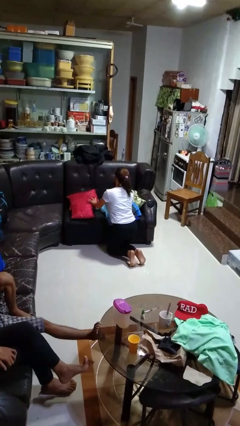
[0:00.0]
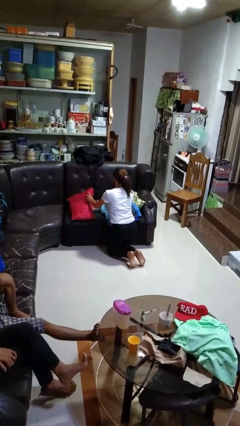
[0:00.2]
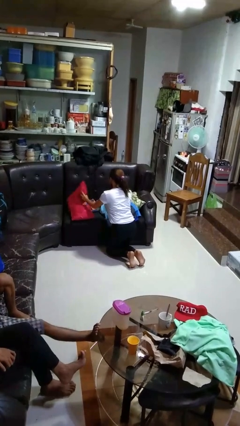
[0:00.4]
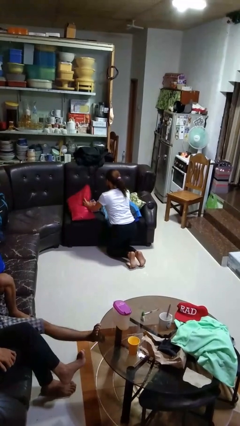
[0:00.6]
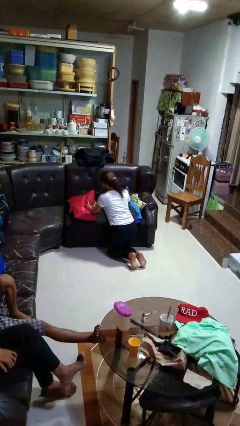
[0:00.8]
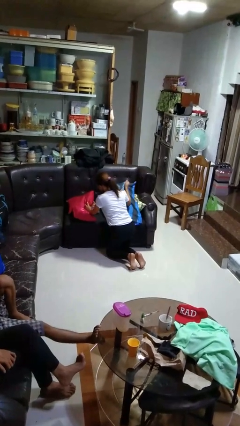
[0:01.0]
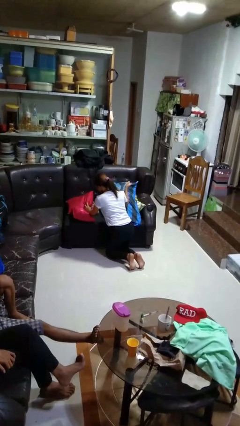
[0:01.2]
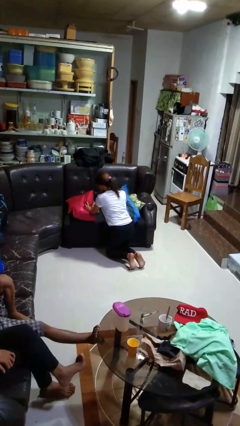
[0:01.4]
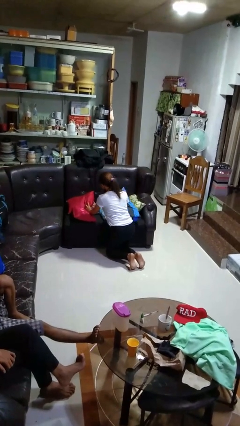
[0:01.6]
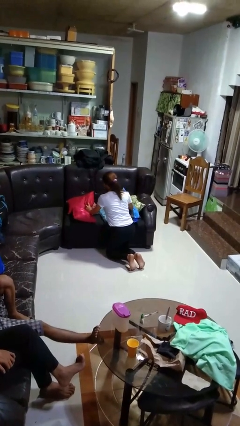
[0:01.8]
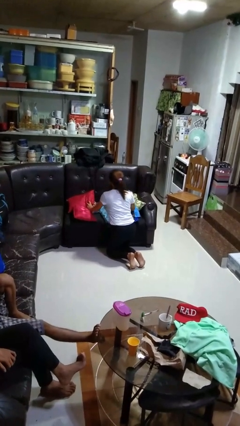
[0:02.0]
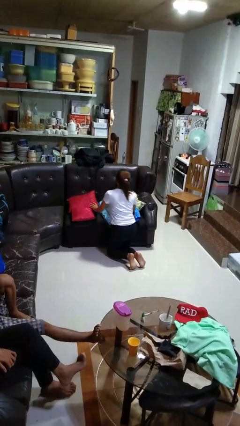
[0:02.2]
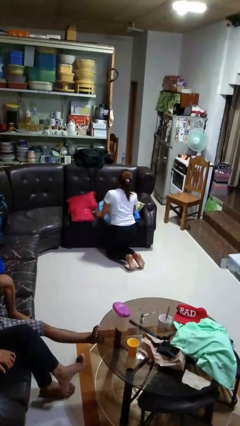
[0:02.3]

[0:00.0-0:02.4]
person searches in couch

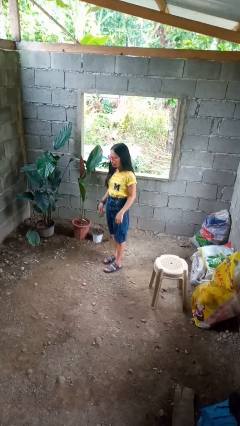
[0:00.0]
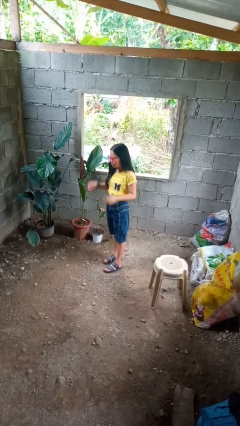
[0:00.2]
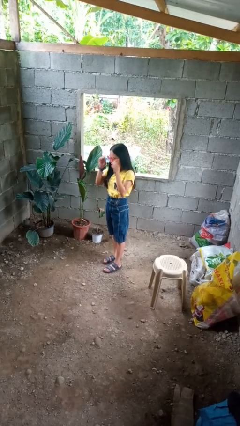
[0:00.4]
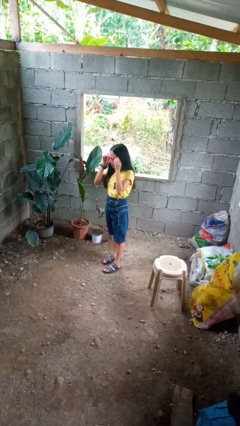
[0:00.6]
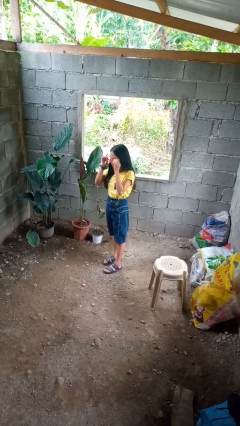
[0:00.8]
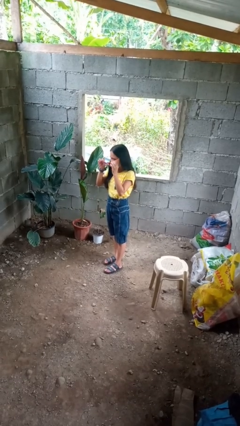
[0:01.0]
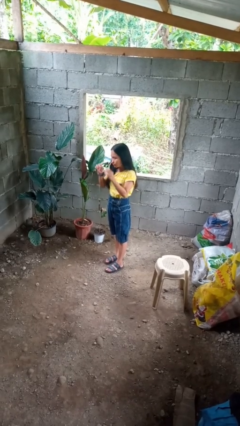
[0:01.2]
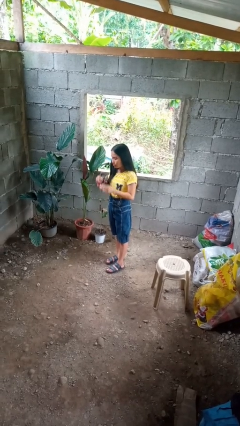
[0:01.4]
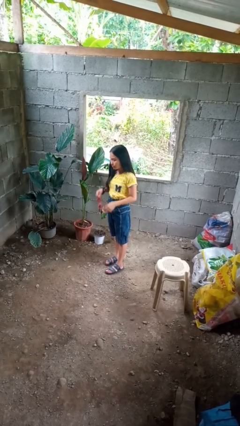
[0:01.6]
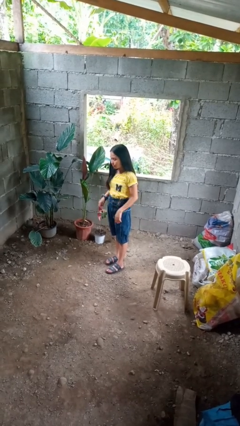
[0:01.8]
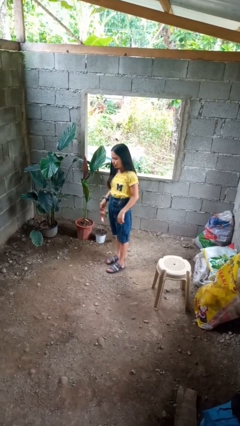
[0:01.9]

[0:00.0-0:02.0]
person takes off sunglasses

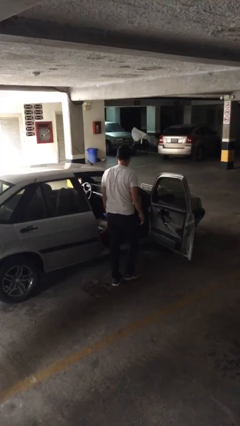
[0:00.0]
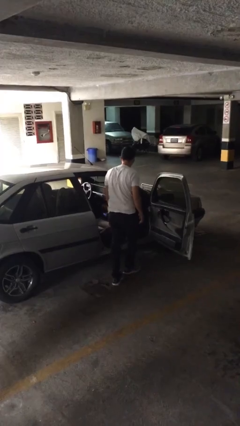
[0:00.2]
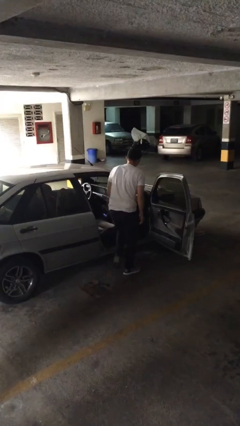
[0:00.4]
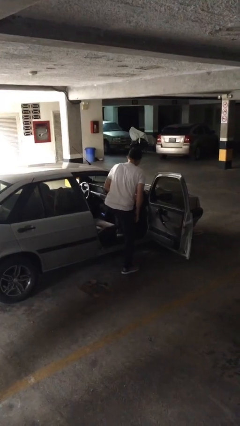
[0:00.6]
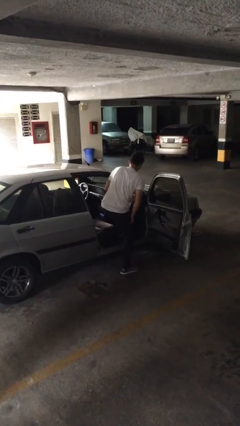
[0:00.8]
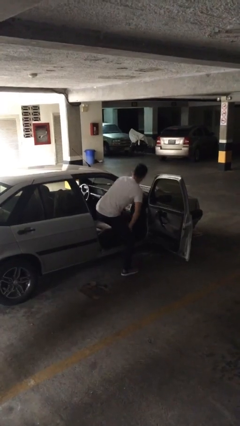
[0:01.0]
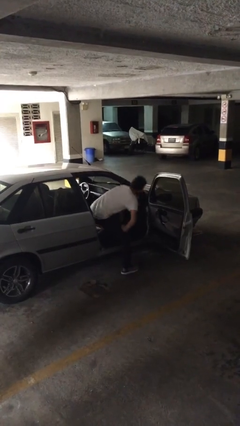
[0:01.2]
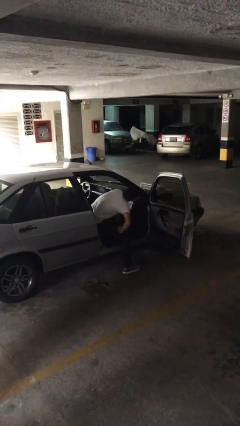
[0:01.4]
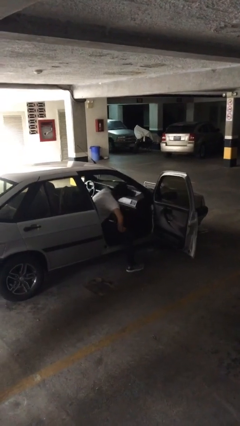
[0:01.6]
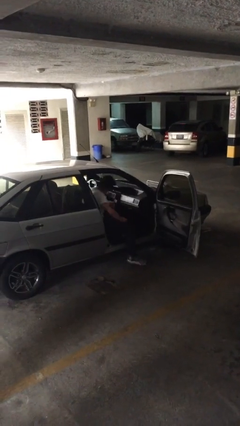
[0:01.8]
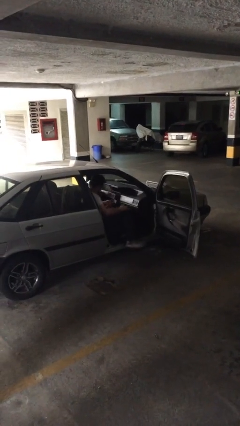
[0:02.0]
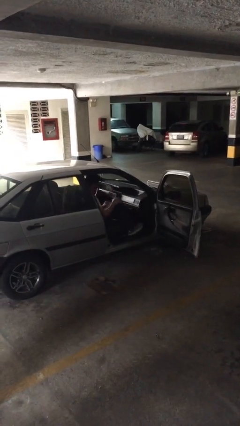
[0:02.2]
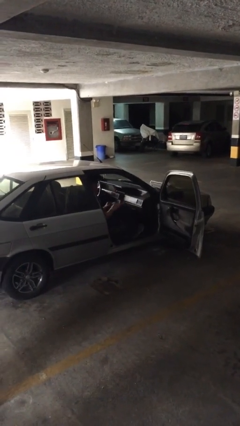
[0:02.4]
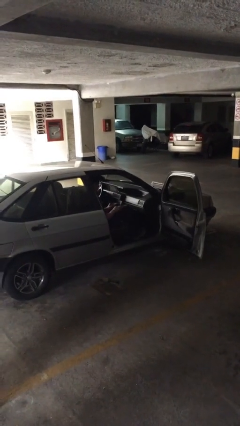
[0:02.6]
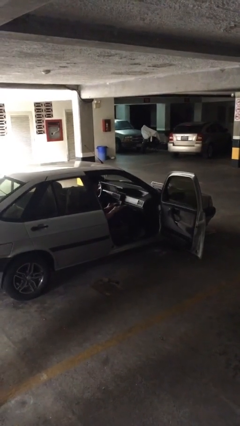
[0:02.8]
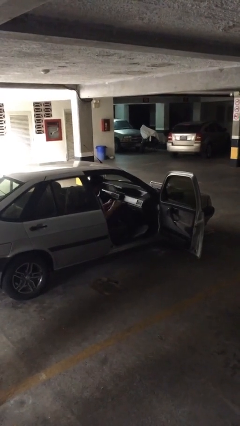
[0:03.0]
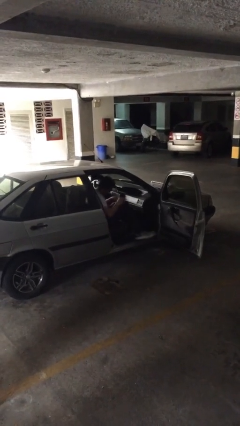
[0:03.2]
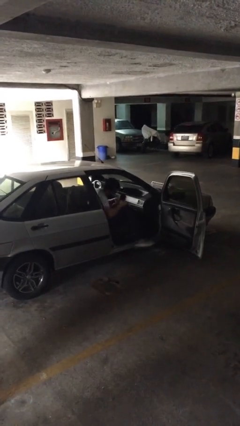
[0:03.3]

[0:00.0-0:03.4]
person enters car

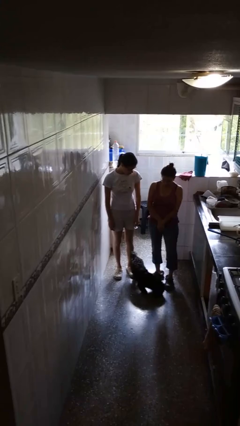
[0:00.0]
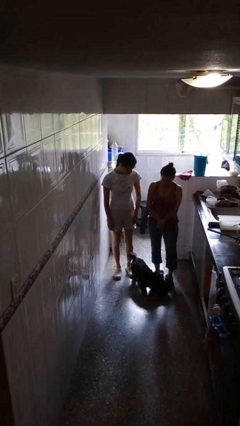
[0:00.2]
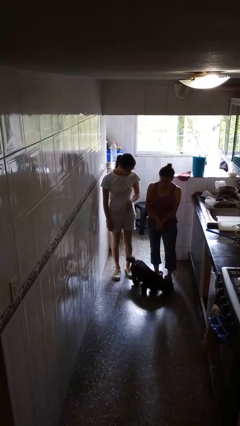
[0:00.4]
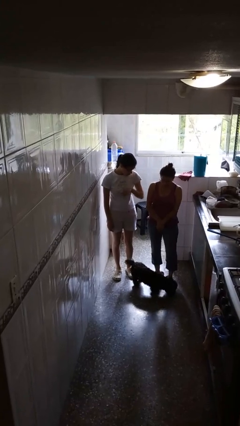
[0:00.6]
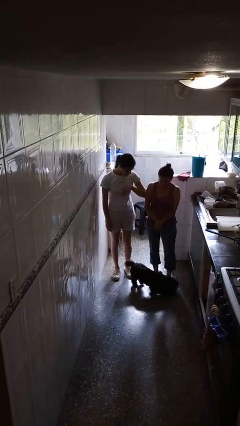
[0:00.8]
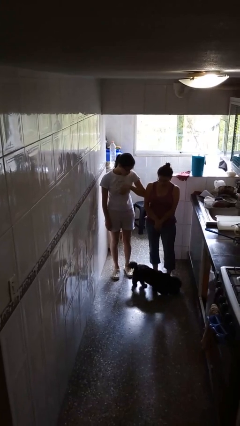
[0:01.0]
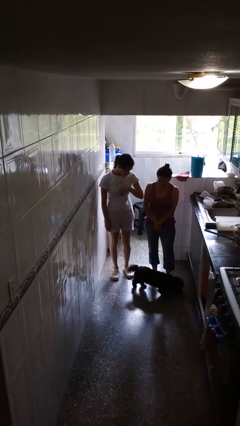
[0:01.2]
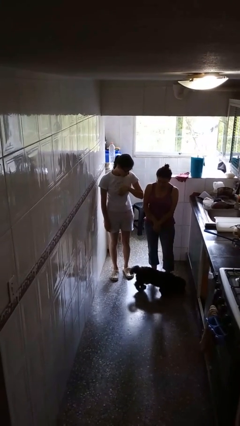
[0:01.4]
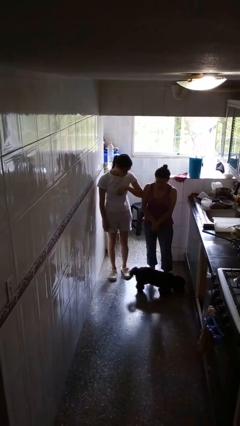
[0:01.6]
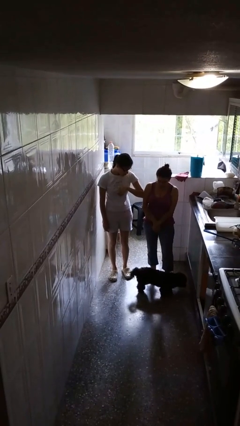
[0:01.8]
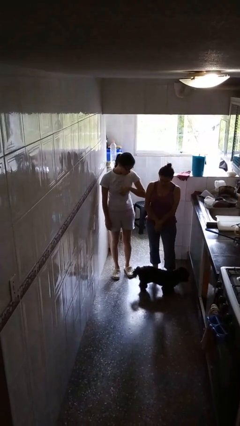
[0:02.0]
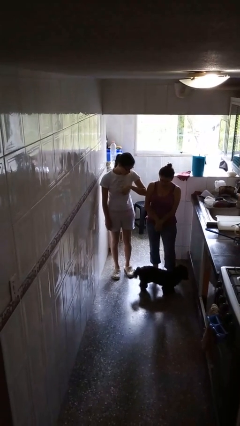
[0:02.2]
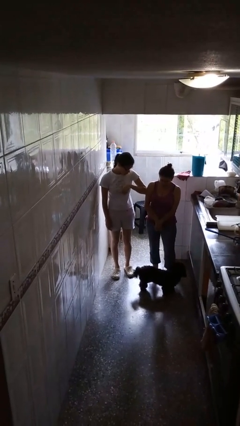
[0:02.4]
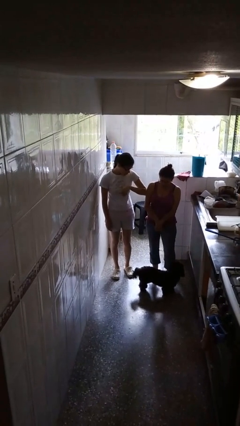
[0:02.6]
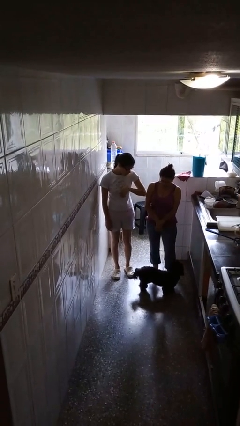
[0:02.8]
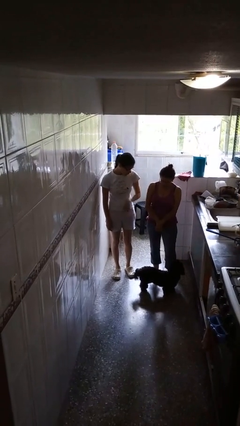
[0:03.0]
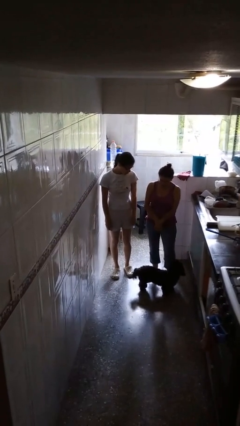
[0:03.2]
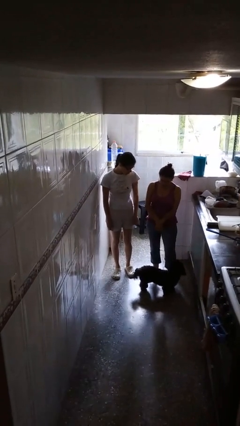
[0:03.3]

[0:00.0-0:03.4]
person nudges person with elbow

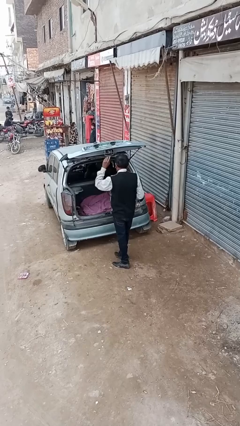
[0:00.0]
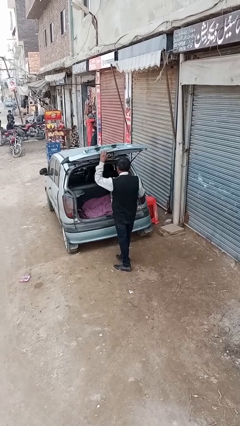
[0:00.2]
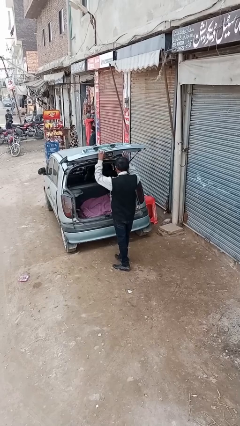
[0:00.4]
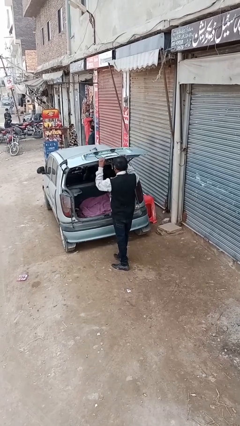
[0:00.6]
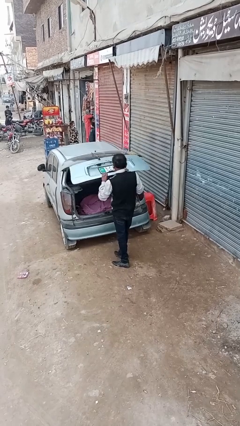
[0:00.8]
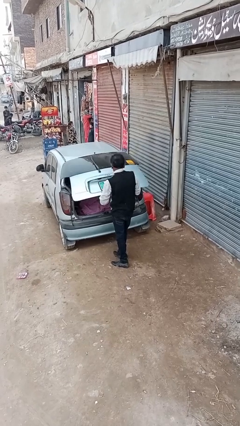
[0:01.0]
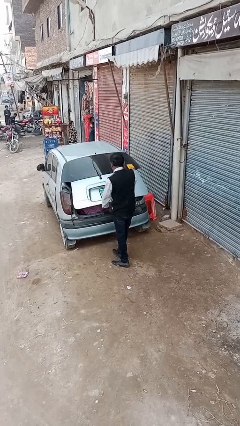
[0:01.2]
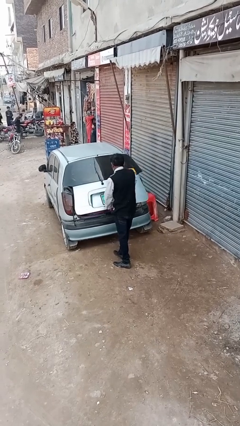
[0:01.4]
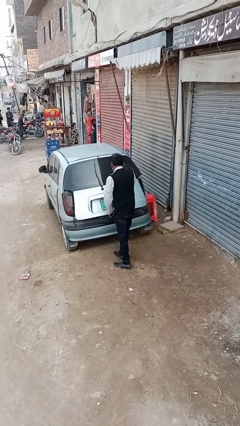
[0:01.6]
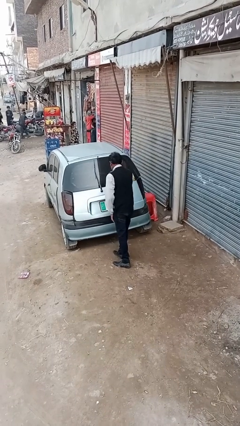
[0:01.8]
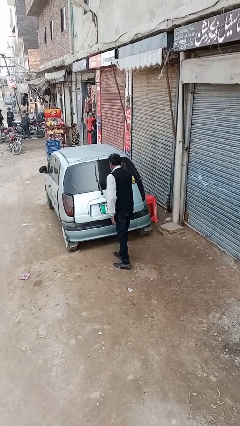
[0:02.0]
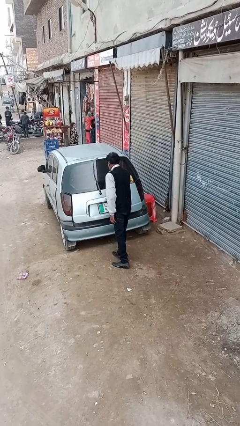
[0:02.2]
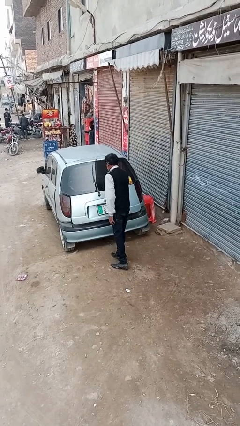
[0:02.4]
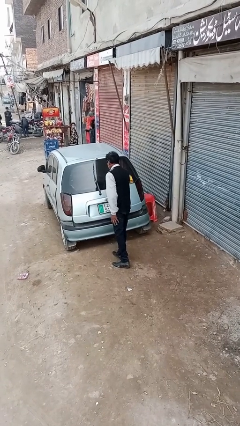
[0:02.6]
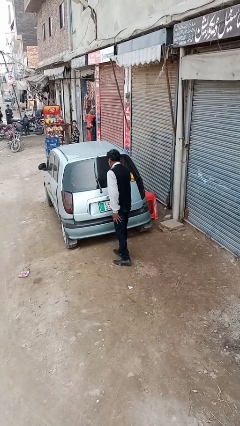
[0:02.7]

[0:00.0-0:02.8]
person closes car trunk

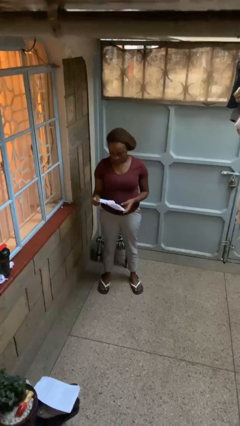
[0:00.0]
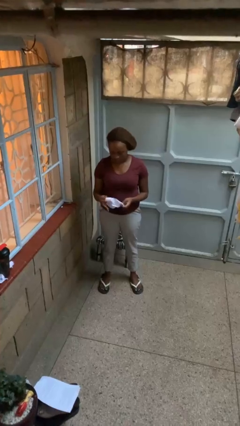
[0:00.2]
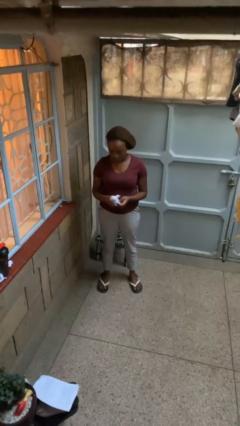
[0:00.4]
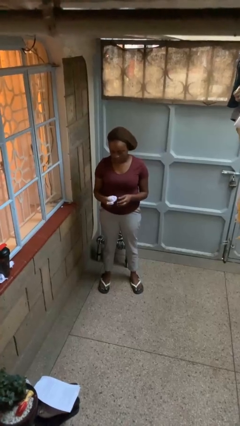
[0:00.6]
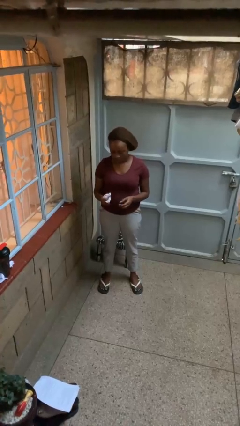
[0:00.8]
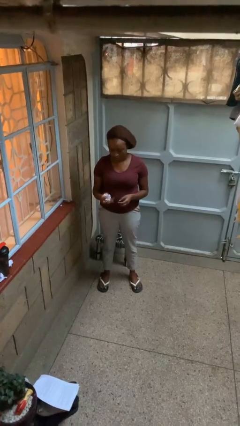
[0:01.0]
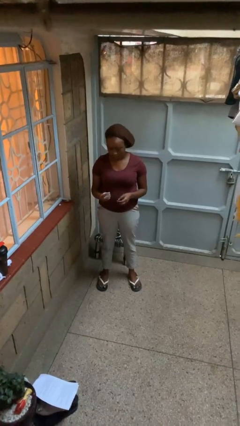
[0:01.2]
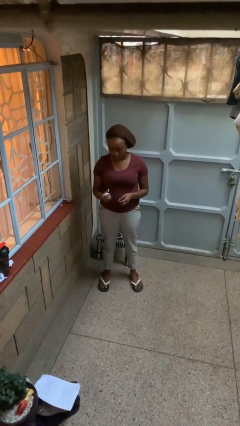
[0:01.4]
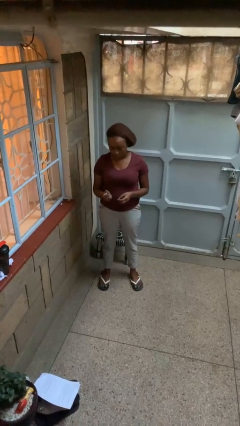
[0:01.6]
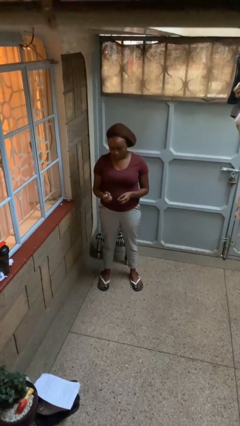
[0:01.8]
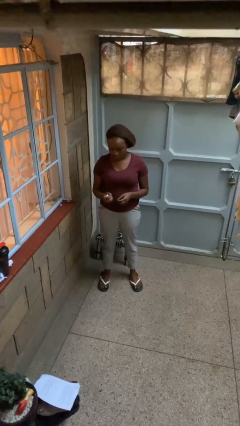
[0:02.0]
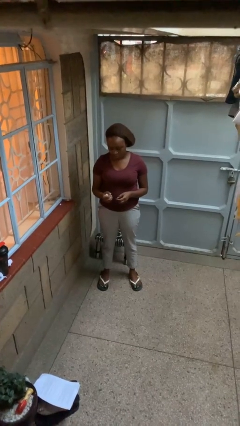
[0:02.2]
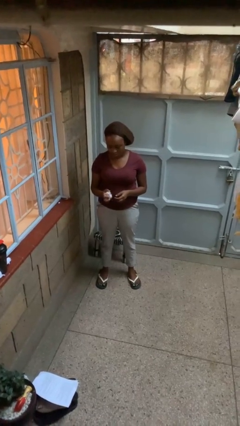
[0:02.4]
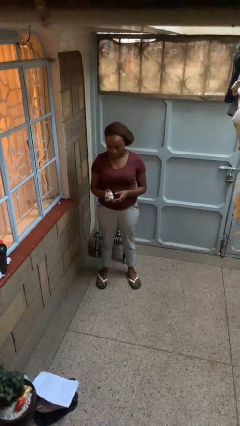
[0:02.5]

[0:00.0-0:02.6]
person crumples paper

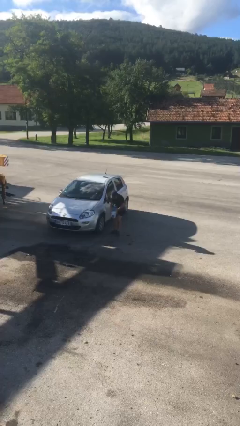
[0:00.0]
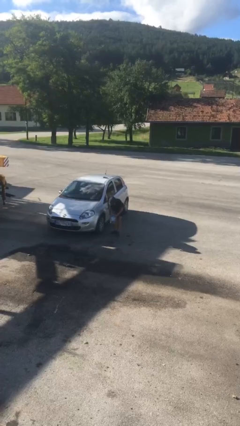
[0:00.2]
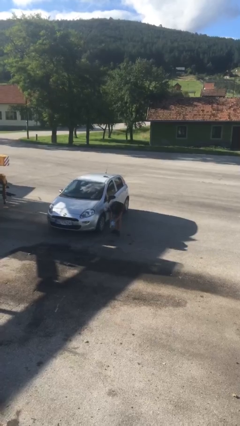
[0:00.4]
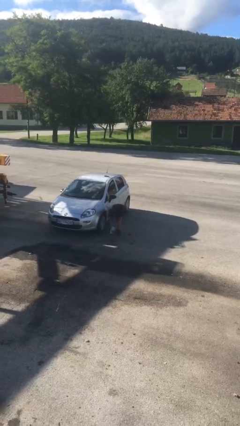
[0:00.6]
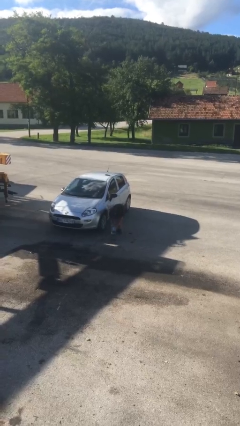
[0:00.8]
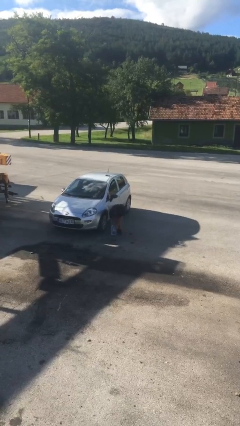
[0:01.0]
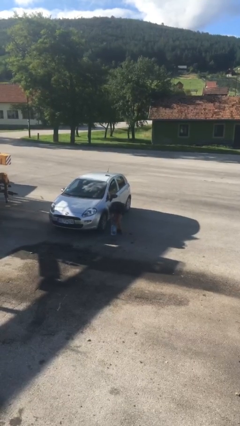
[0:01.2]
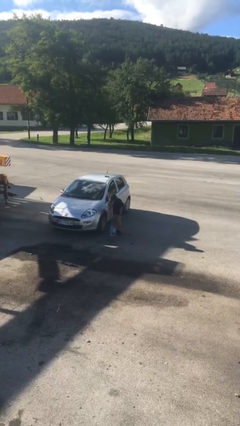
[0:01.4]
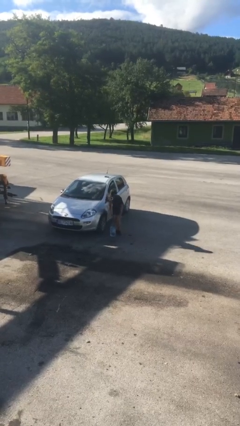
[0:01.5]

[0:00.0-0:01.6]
person puts down object on floor
